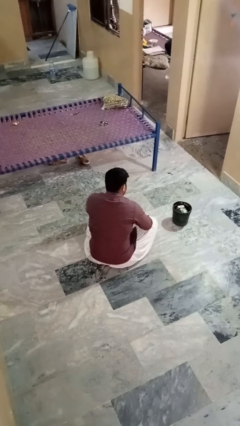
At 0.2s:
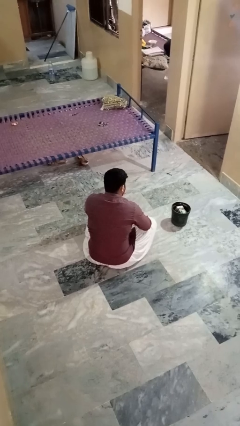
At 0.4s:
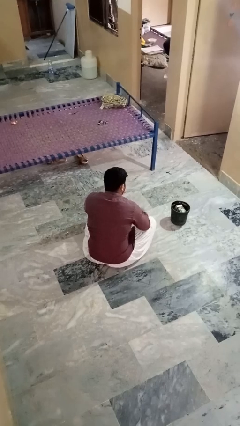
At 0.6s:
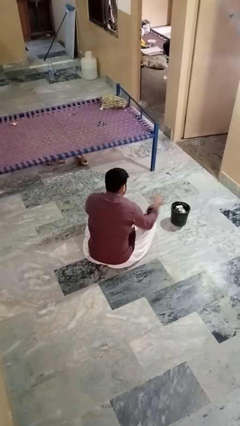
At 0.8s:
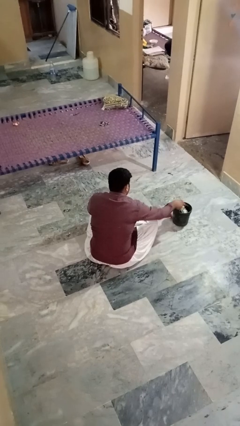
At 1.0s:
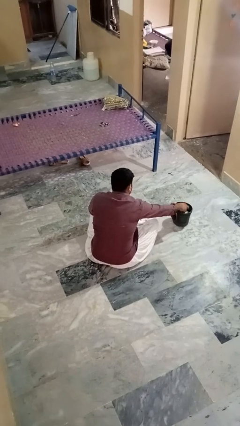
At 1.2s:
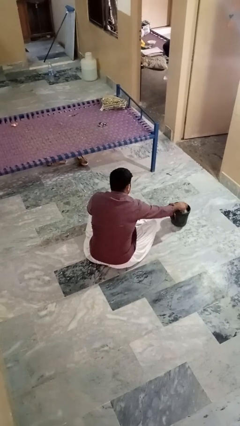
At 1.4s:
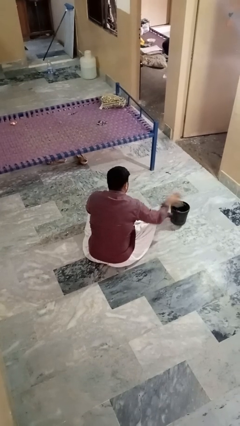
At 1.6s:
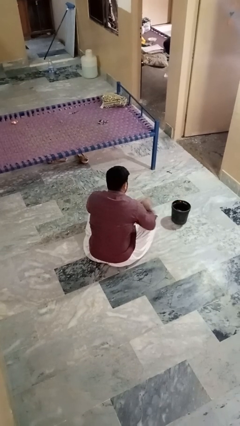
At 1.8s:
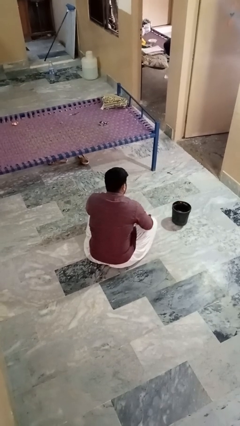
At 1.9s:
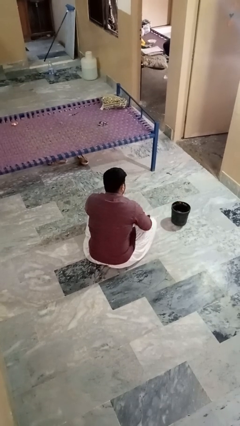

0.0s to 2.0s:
person takes object from basket

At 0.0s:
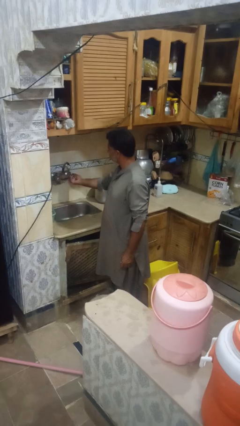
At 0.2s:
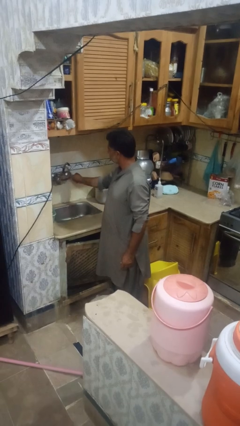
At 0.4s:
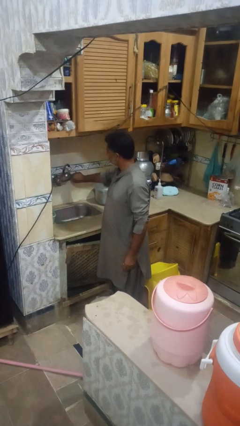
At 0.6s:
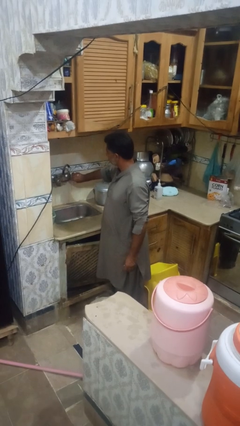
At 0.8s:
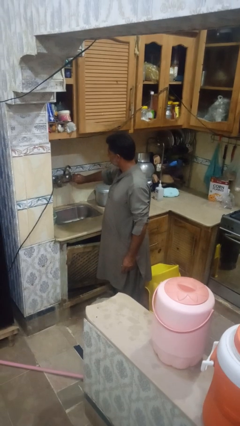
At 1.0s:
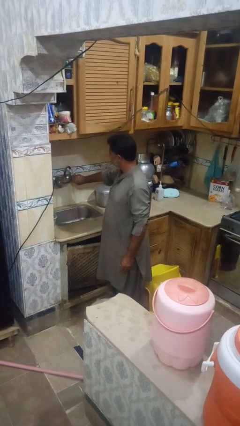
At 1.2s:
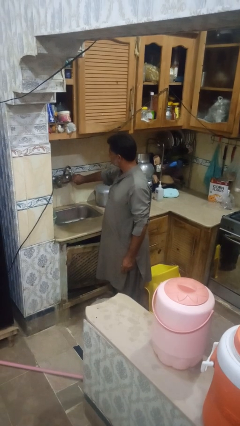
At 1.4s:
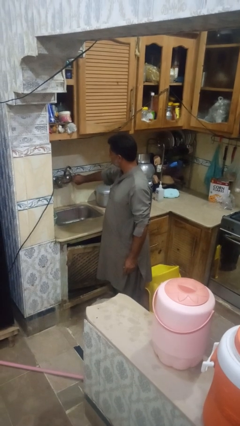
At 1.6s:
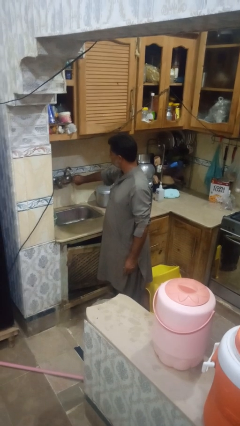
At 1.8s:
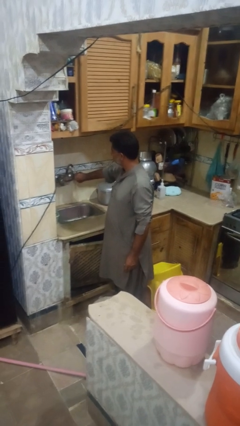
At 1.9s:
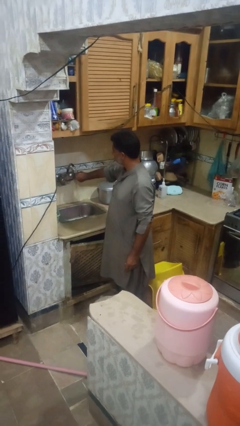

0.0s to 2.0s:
person turns on faucet

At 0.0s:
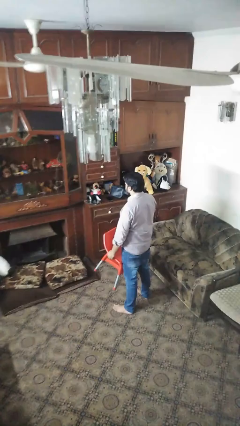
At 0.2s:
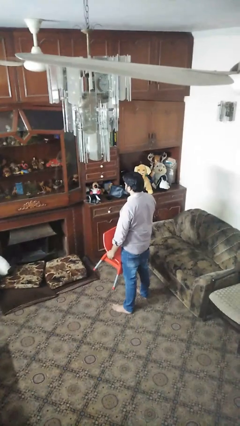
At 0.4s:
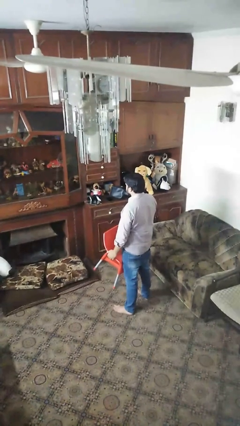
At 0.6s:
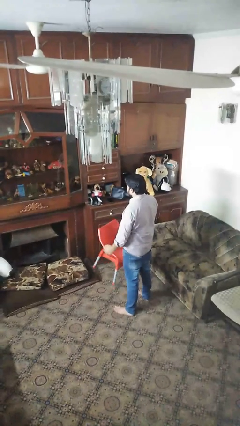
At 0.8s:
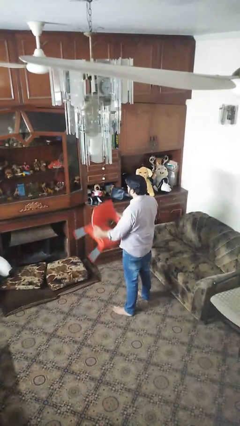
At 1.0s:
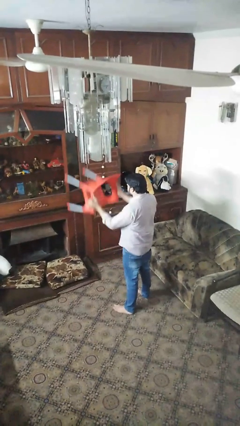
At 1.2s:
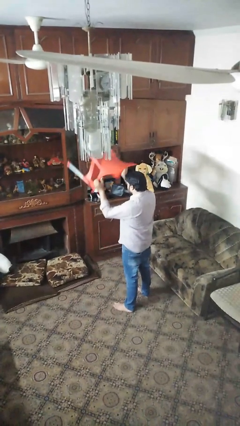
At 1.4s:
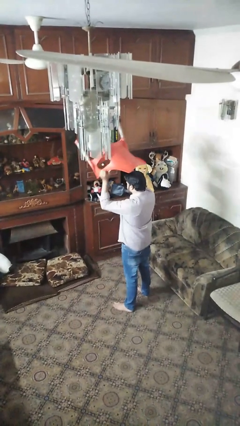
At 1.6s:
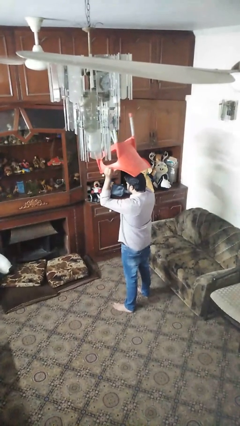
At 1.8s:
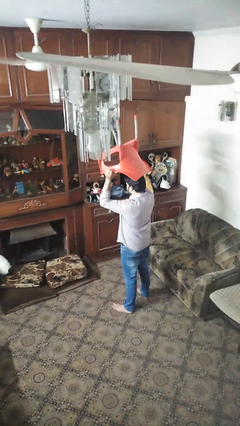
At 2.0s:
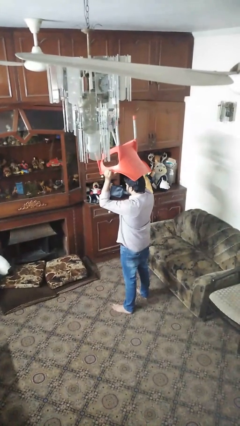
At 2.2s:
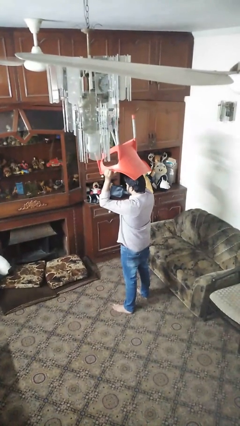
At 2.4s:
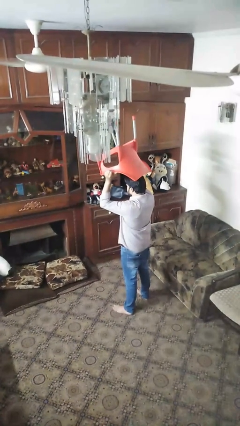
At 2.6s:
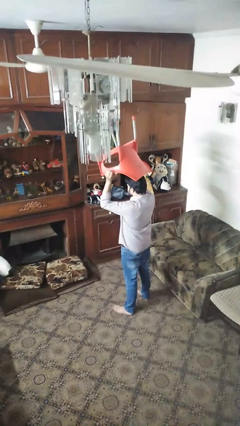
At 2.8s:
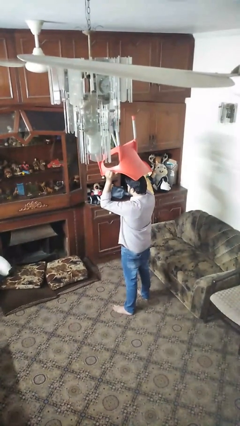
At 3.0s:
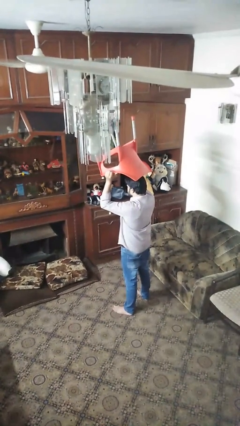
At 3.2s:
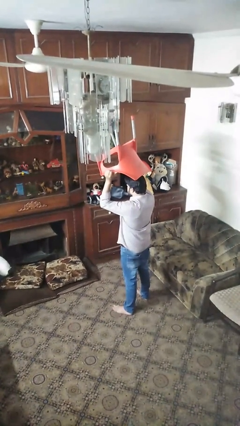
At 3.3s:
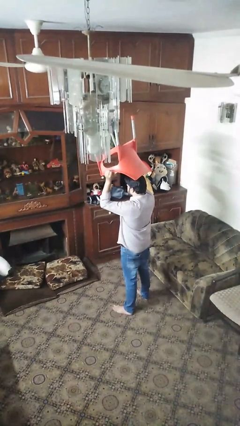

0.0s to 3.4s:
person holds object above head

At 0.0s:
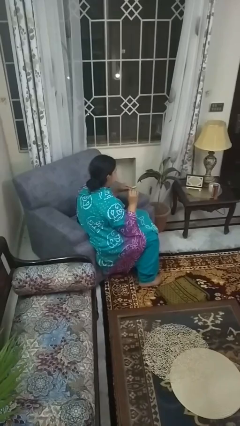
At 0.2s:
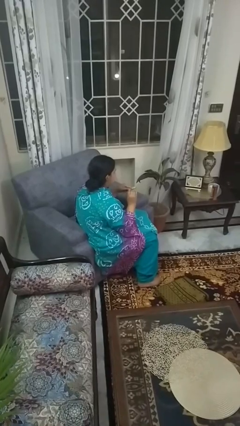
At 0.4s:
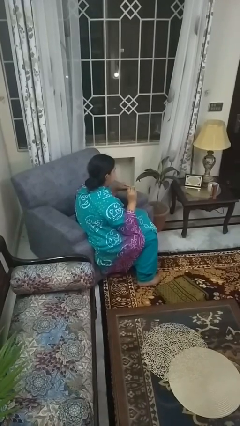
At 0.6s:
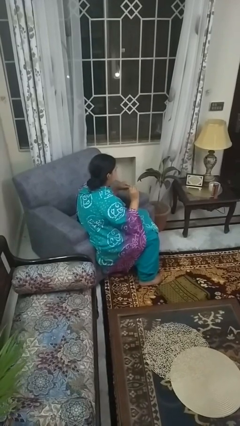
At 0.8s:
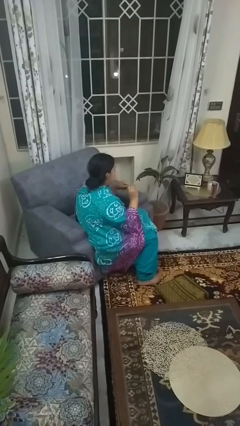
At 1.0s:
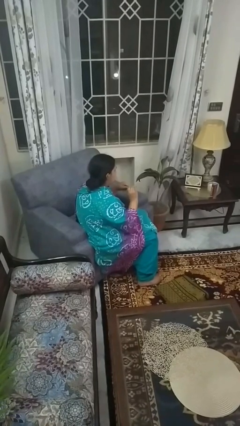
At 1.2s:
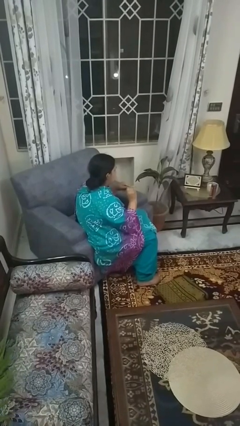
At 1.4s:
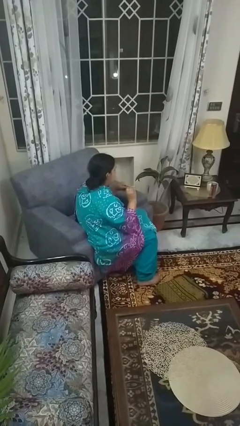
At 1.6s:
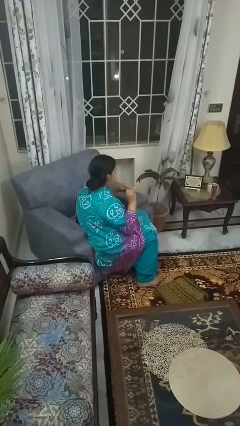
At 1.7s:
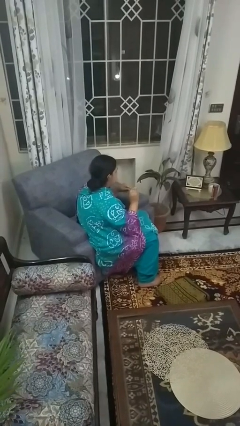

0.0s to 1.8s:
person files fingernails

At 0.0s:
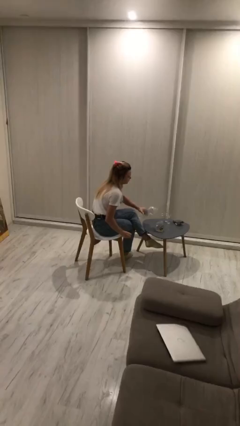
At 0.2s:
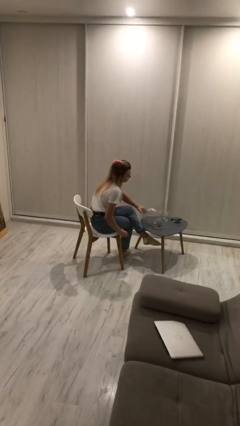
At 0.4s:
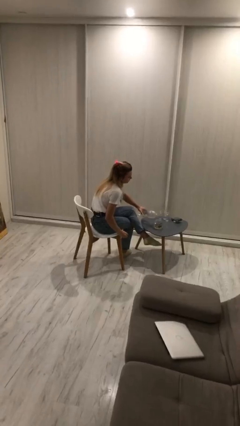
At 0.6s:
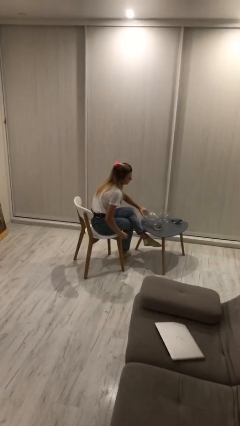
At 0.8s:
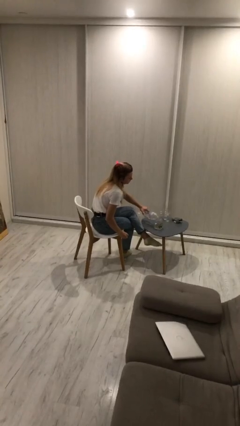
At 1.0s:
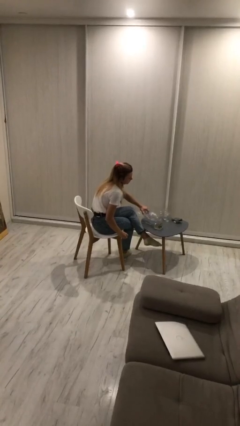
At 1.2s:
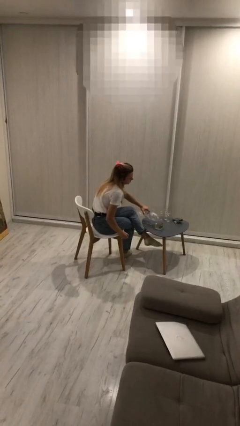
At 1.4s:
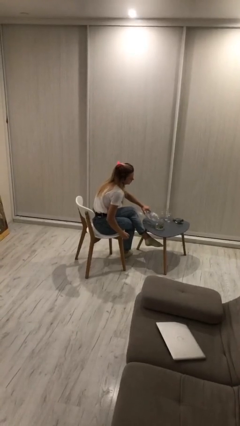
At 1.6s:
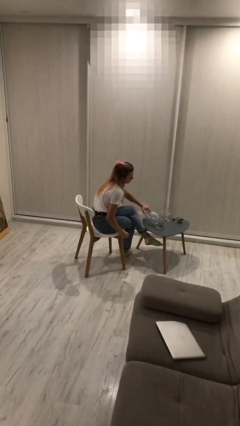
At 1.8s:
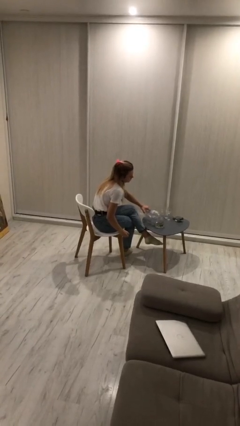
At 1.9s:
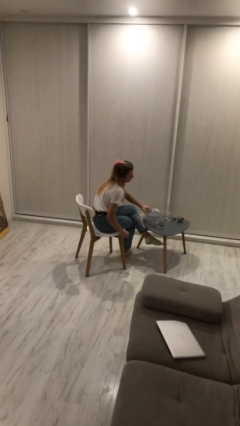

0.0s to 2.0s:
person pours liquid into cup

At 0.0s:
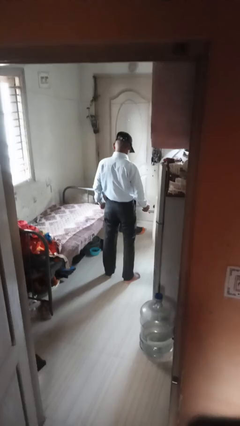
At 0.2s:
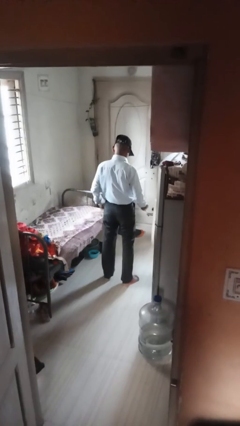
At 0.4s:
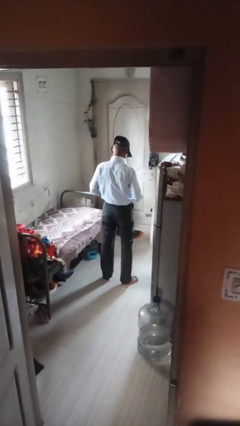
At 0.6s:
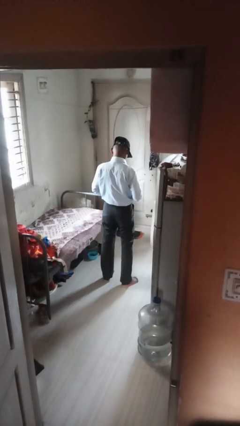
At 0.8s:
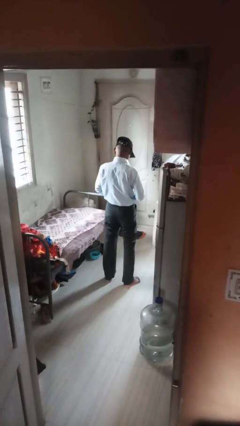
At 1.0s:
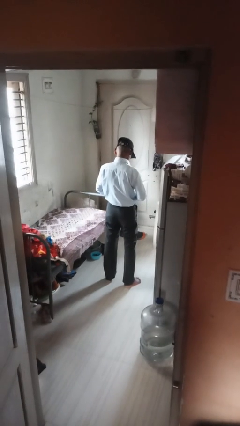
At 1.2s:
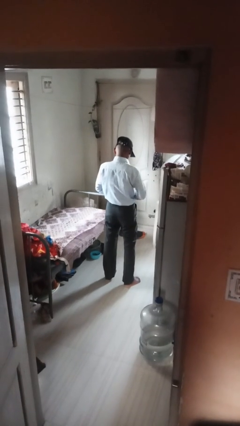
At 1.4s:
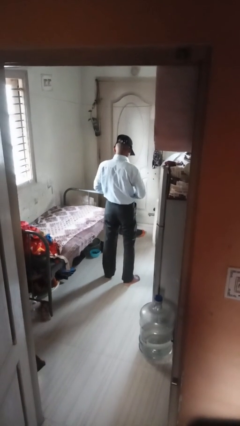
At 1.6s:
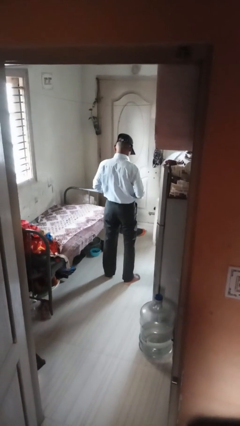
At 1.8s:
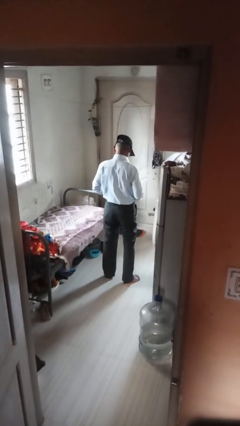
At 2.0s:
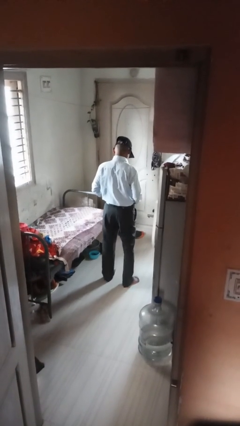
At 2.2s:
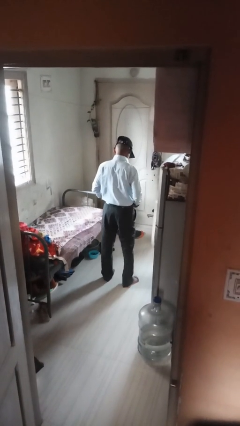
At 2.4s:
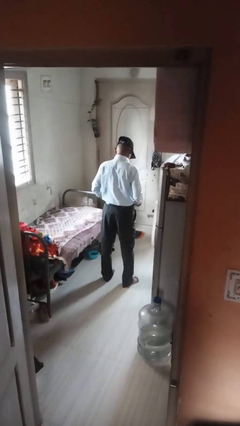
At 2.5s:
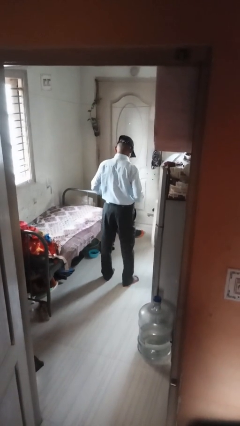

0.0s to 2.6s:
person hikes up pants

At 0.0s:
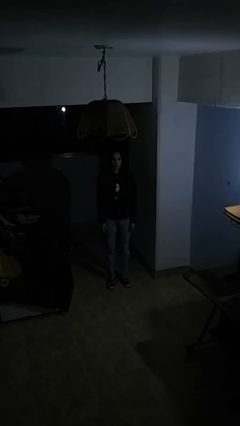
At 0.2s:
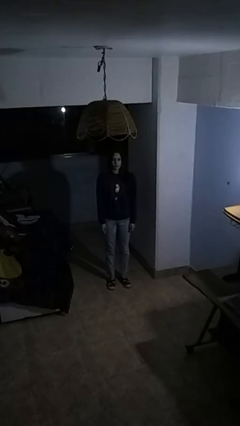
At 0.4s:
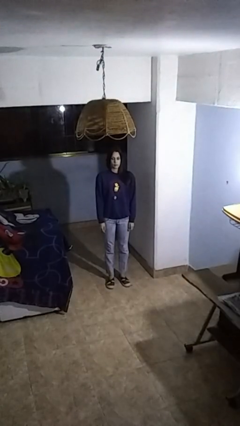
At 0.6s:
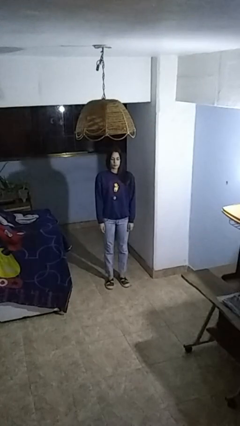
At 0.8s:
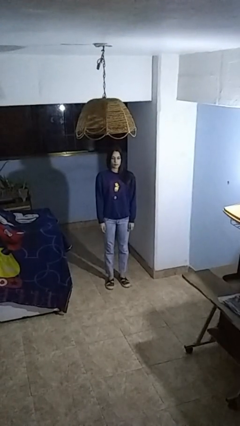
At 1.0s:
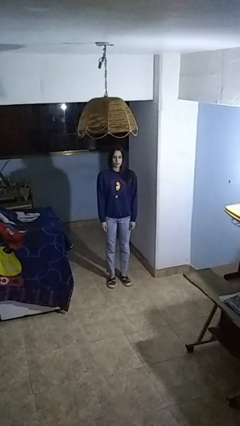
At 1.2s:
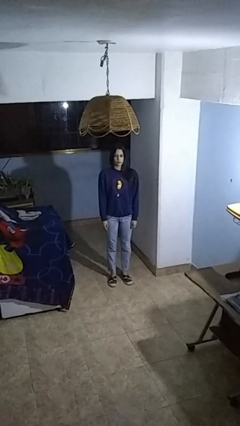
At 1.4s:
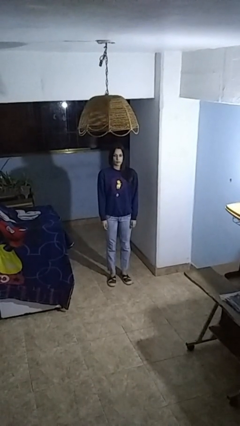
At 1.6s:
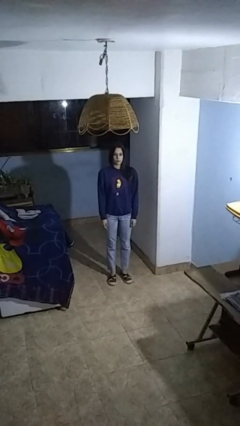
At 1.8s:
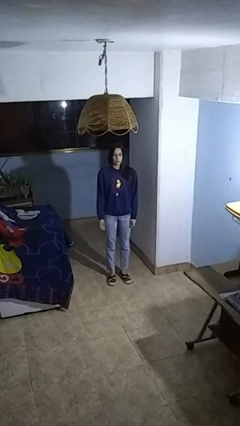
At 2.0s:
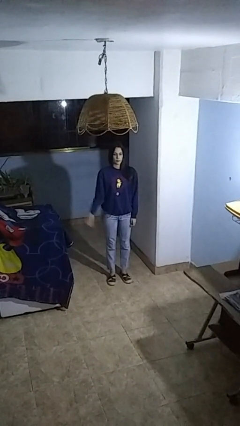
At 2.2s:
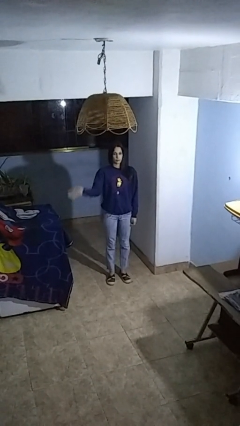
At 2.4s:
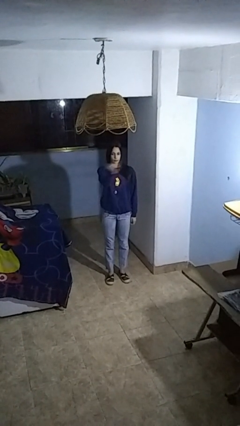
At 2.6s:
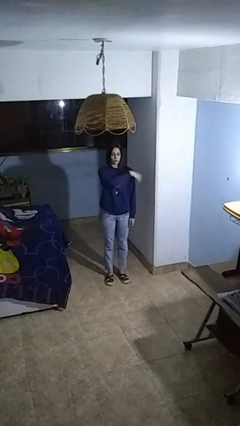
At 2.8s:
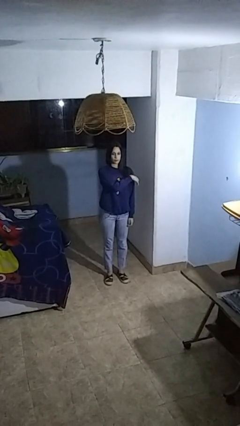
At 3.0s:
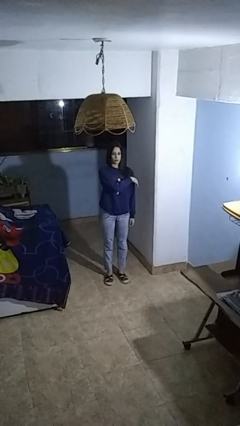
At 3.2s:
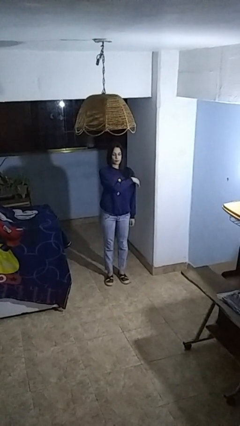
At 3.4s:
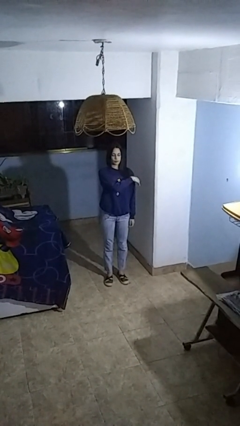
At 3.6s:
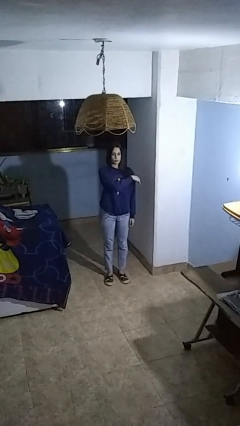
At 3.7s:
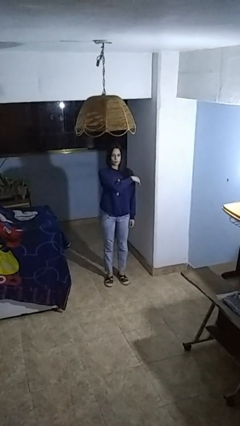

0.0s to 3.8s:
person gestures swipe left
